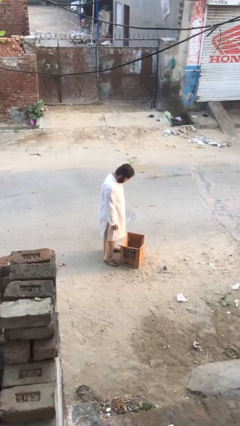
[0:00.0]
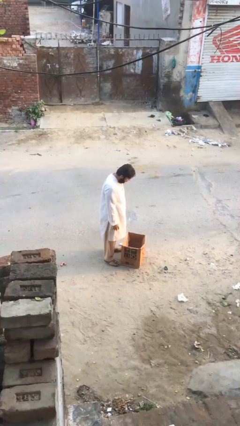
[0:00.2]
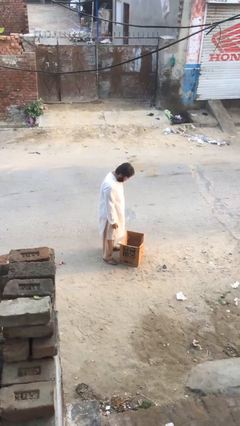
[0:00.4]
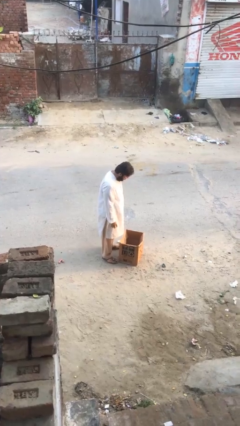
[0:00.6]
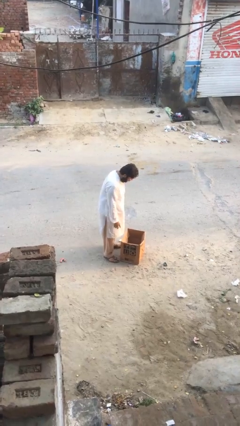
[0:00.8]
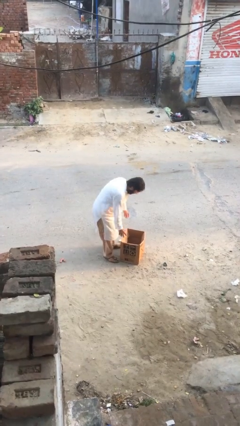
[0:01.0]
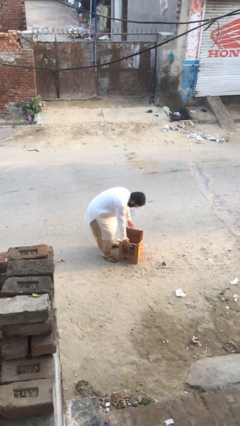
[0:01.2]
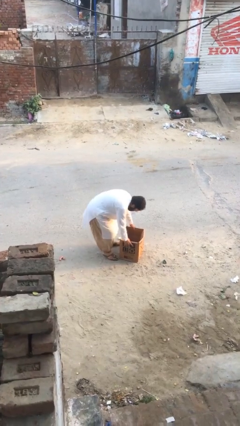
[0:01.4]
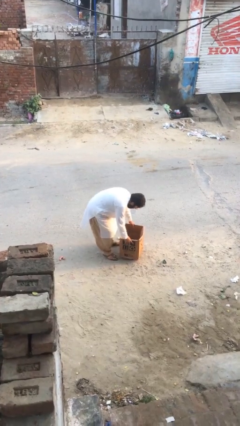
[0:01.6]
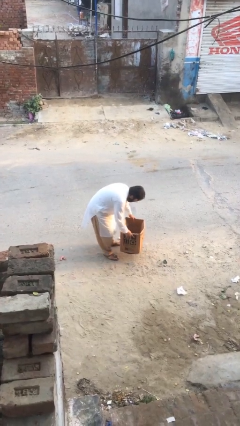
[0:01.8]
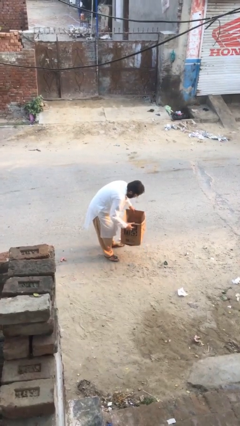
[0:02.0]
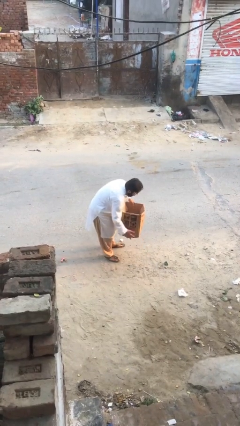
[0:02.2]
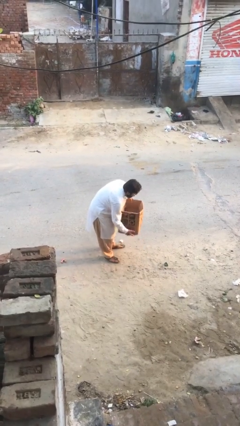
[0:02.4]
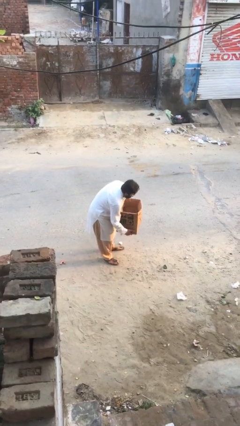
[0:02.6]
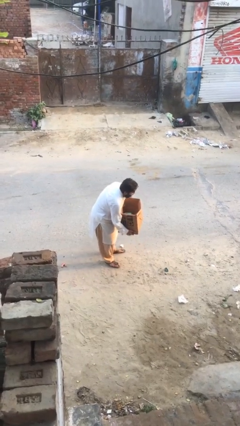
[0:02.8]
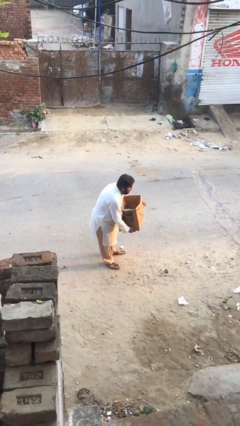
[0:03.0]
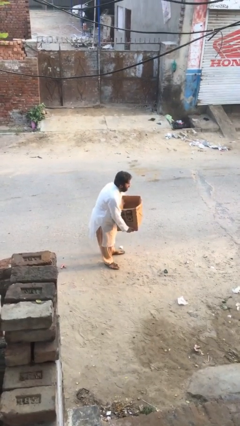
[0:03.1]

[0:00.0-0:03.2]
person picks up object from floor

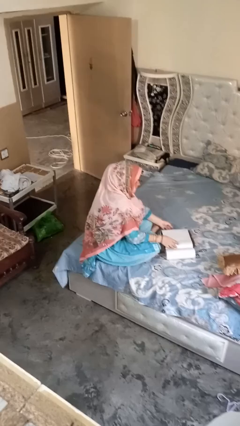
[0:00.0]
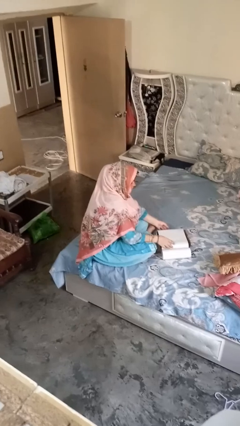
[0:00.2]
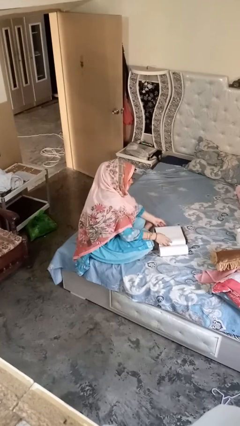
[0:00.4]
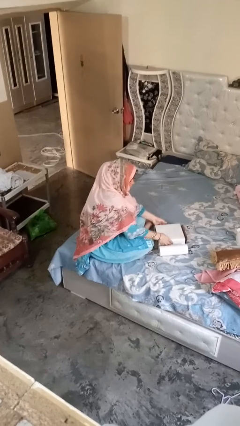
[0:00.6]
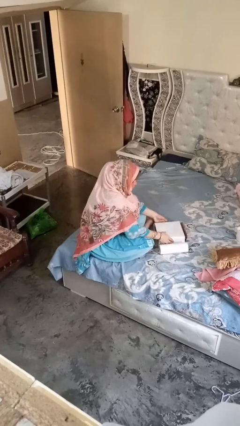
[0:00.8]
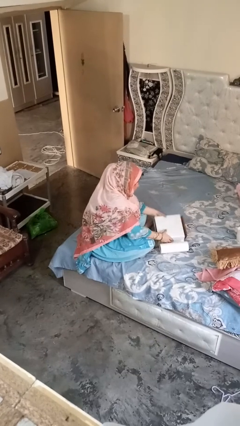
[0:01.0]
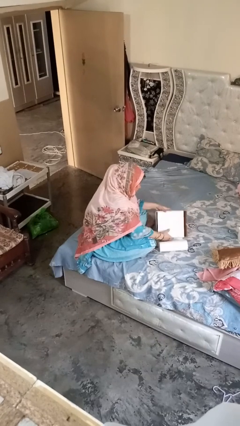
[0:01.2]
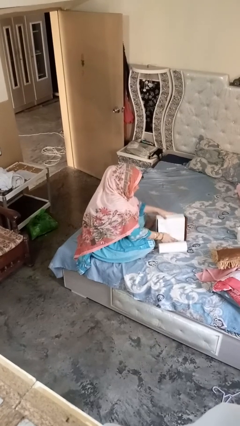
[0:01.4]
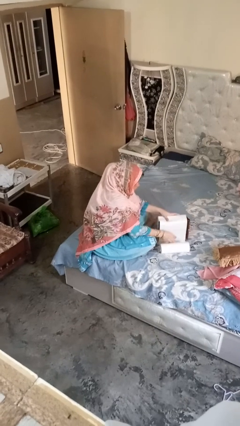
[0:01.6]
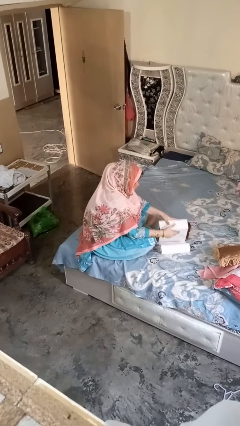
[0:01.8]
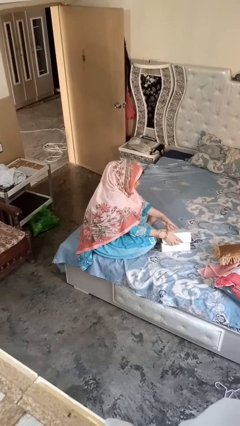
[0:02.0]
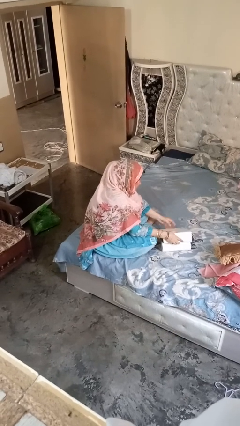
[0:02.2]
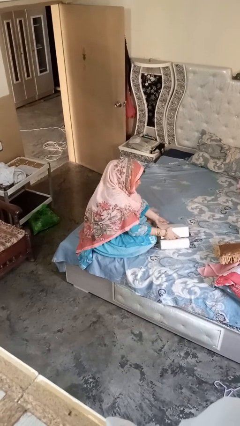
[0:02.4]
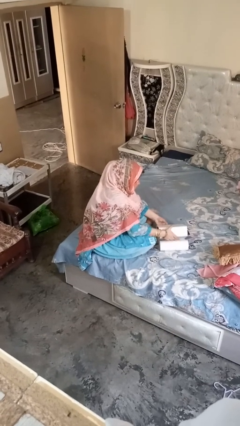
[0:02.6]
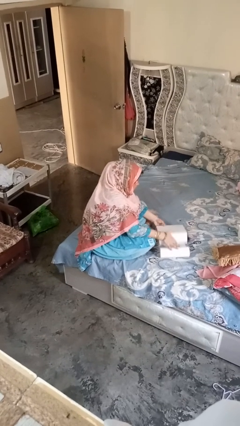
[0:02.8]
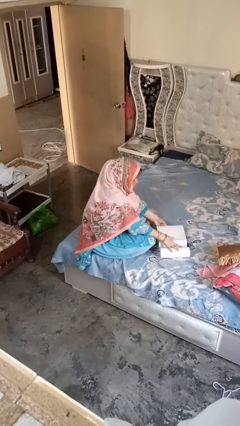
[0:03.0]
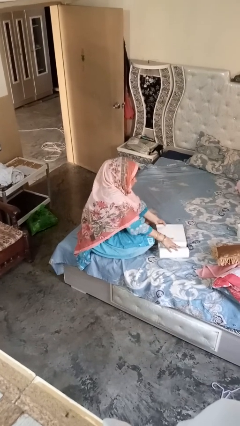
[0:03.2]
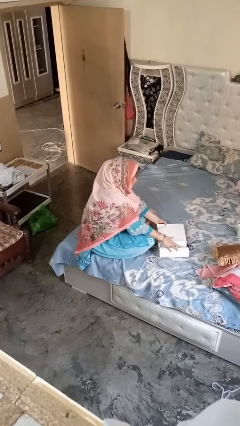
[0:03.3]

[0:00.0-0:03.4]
person wraps box

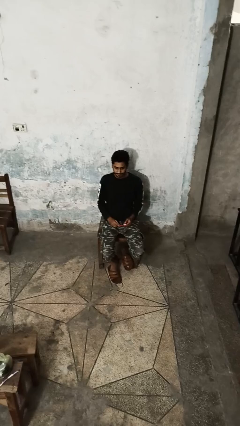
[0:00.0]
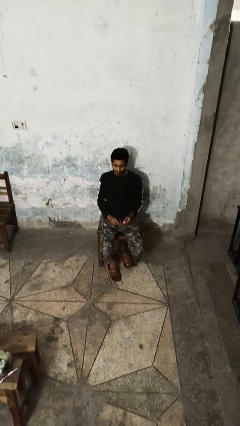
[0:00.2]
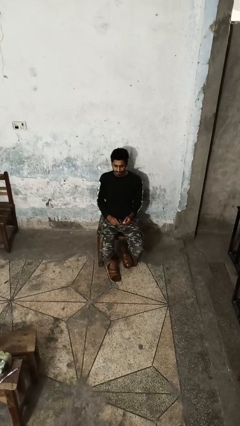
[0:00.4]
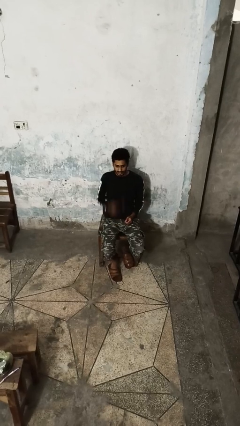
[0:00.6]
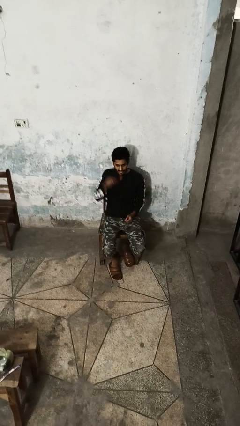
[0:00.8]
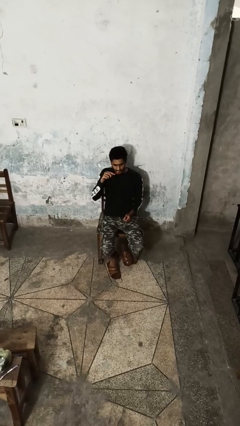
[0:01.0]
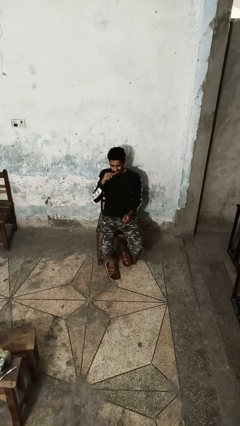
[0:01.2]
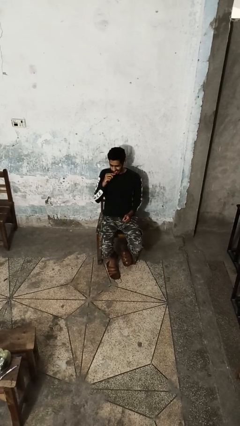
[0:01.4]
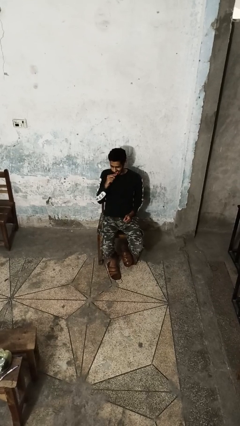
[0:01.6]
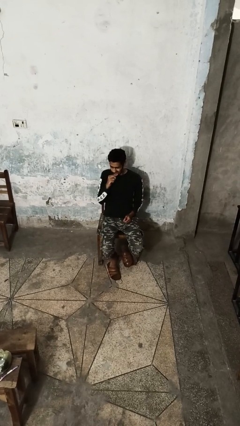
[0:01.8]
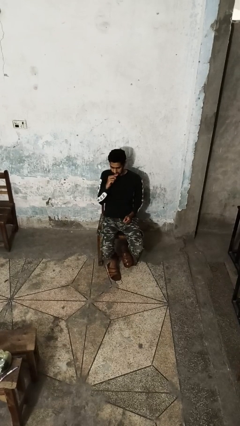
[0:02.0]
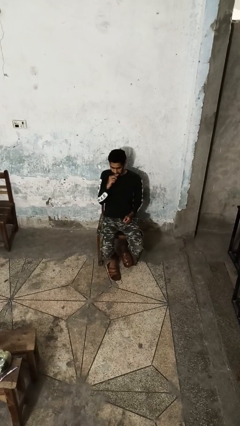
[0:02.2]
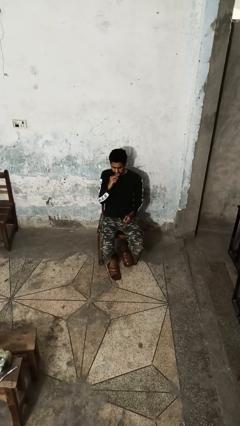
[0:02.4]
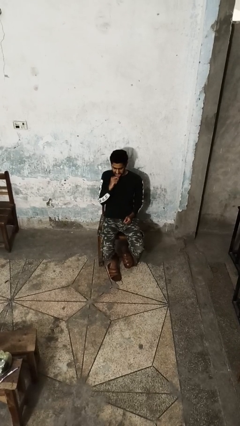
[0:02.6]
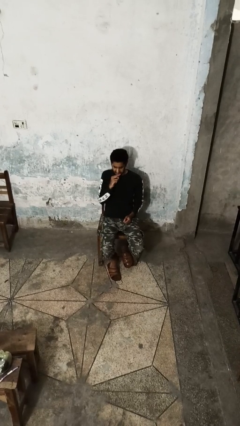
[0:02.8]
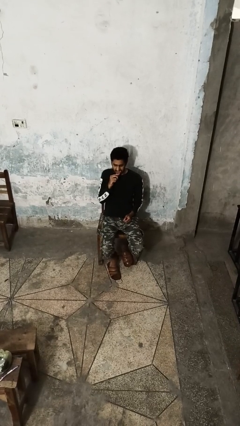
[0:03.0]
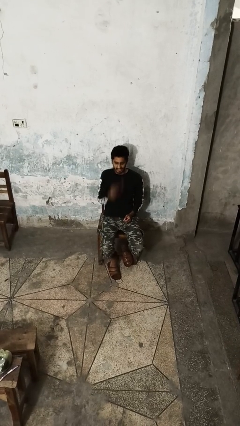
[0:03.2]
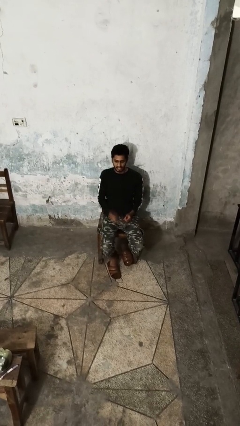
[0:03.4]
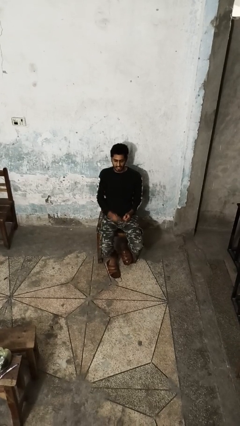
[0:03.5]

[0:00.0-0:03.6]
person brushes teeth

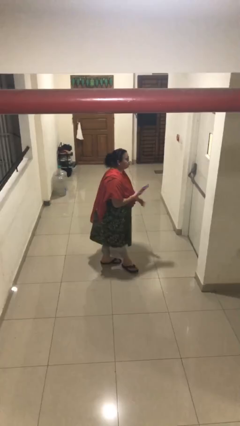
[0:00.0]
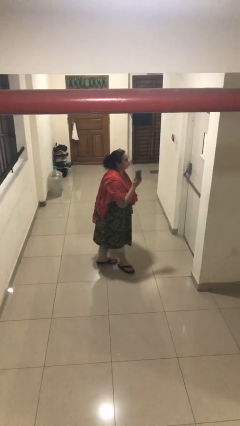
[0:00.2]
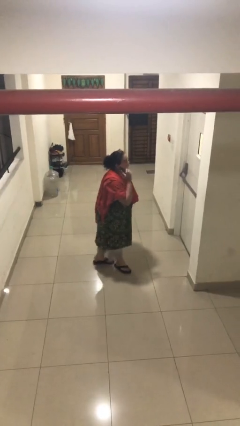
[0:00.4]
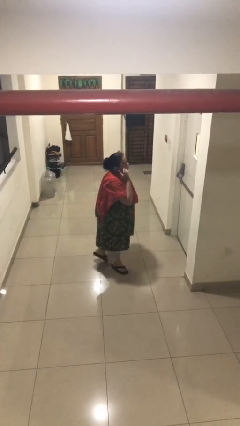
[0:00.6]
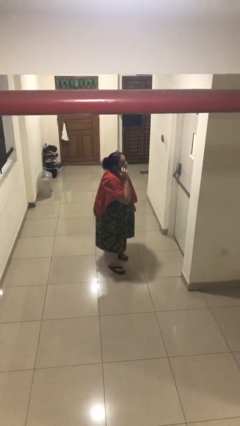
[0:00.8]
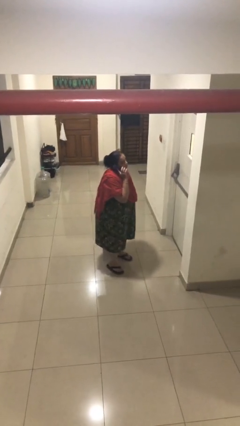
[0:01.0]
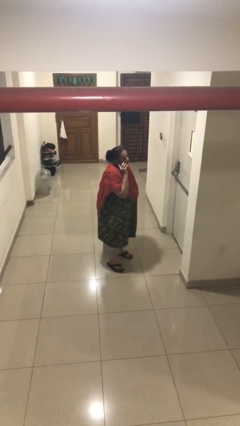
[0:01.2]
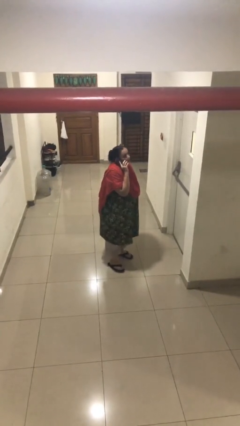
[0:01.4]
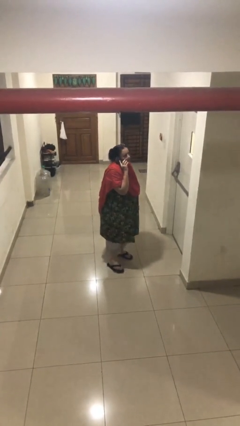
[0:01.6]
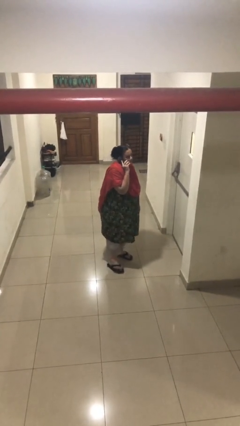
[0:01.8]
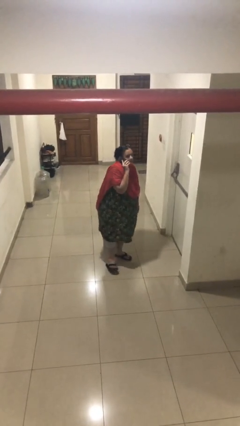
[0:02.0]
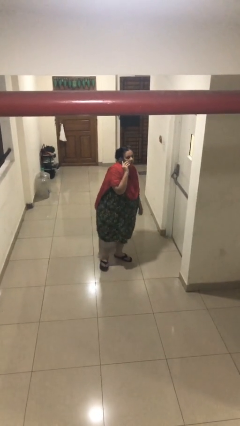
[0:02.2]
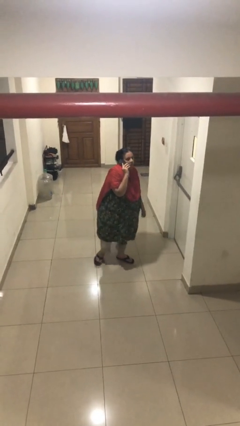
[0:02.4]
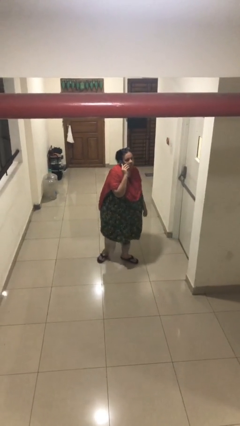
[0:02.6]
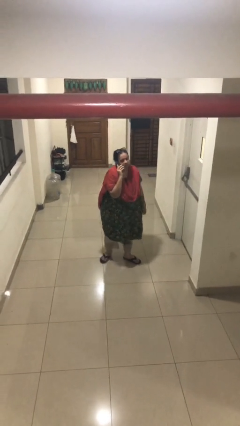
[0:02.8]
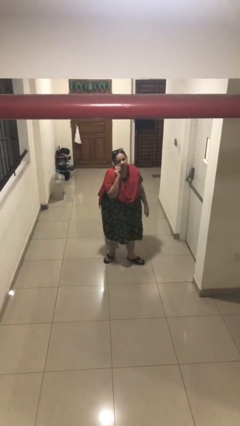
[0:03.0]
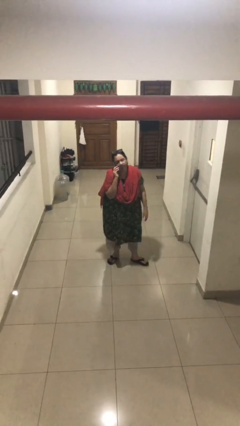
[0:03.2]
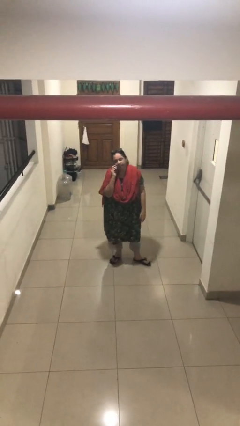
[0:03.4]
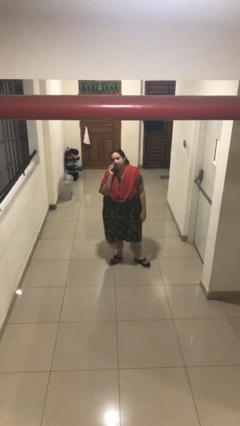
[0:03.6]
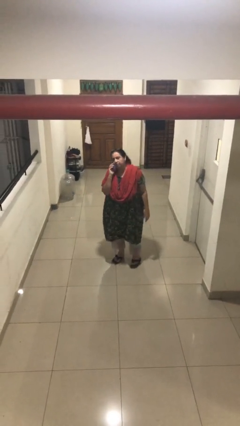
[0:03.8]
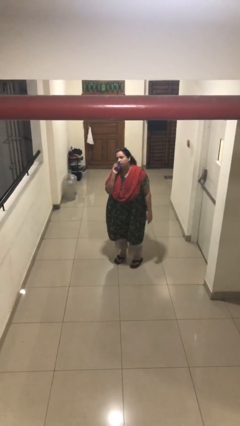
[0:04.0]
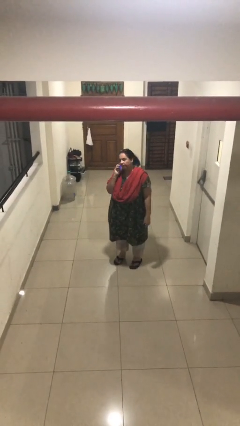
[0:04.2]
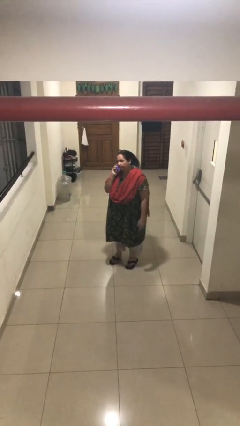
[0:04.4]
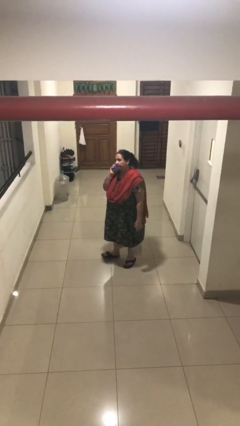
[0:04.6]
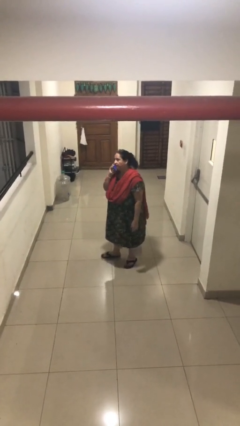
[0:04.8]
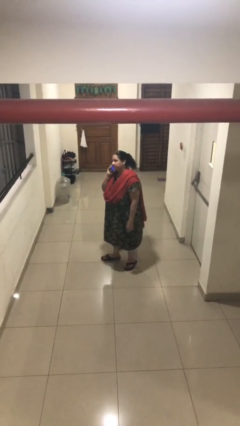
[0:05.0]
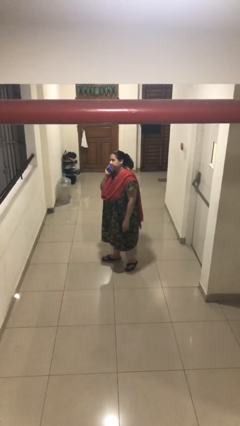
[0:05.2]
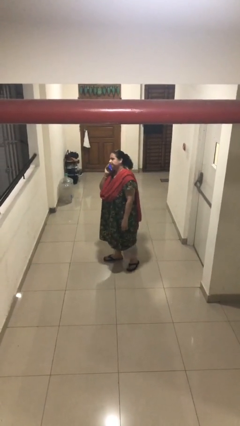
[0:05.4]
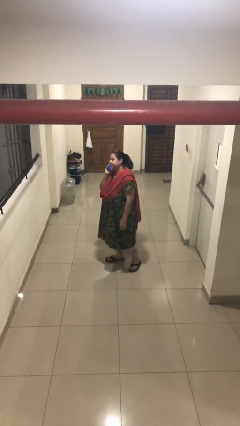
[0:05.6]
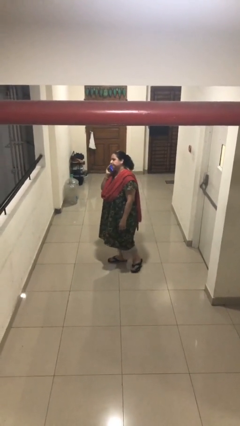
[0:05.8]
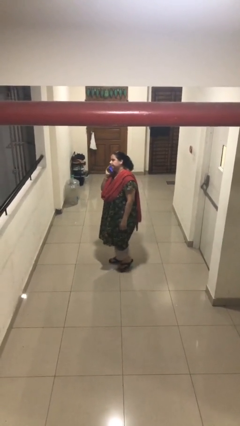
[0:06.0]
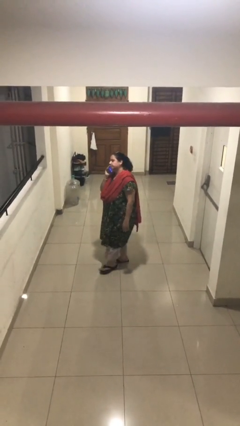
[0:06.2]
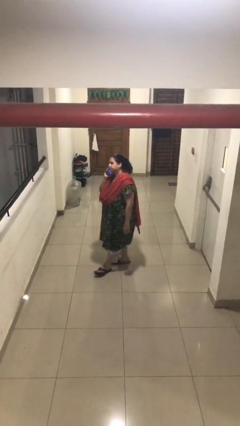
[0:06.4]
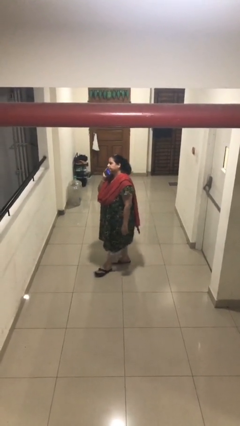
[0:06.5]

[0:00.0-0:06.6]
person talks on phone

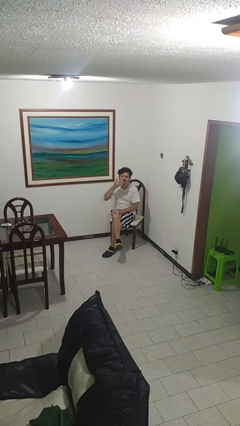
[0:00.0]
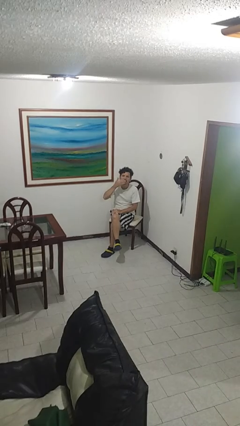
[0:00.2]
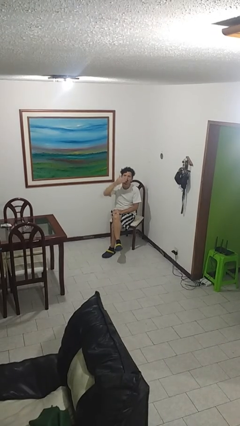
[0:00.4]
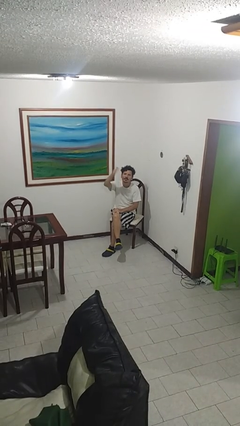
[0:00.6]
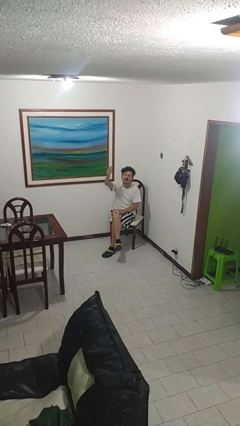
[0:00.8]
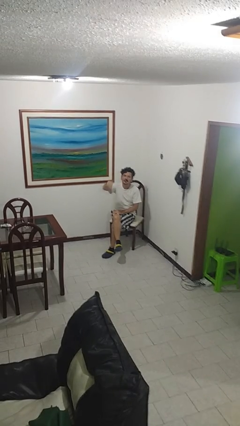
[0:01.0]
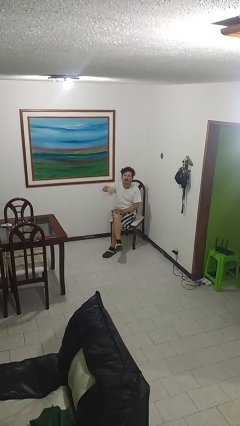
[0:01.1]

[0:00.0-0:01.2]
person gestures blow kiss
